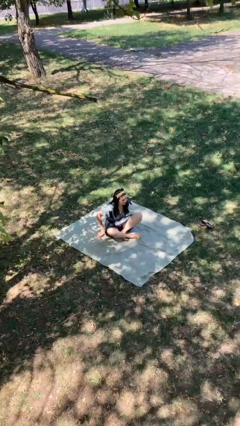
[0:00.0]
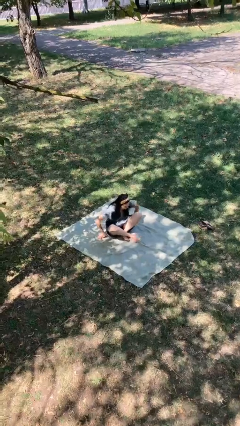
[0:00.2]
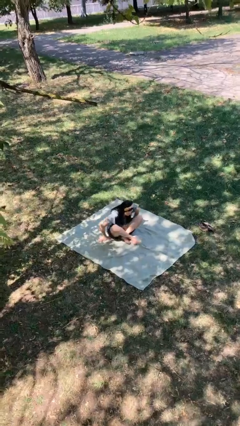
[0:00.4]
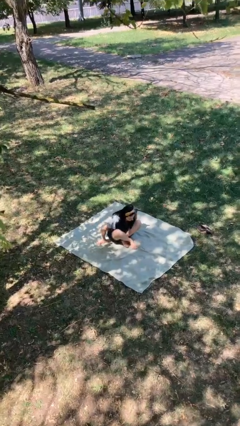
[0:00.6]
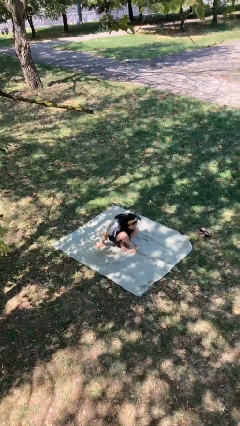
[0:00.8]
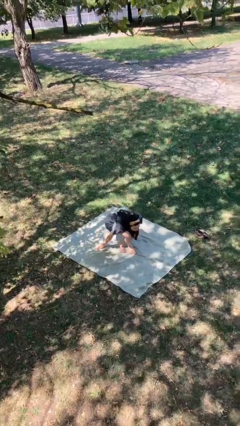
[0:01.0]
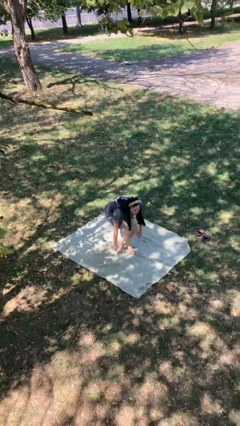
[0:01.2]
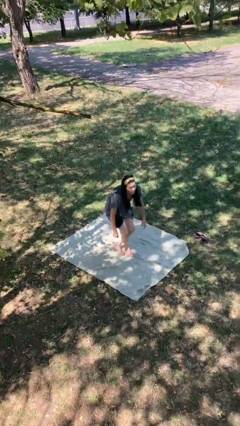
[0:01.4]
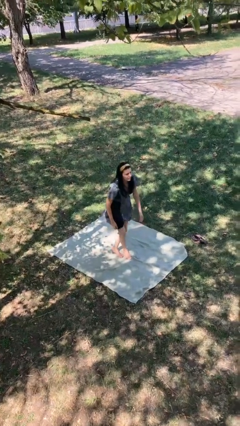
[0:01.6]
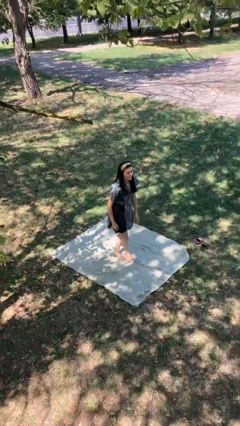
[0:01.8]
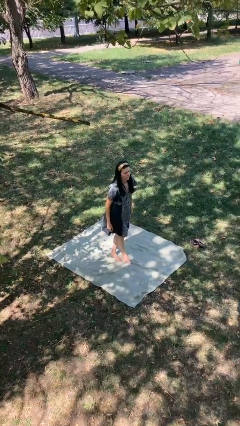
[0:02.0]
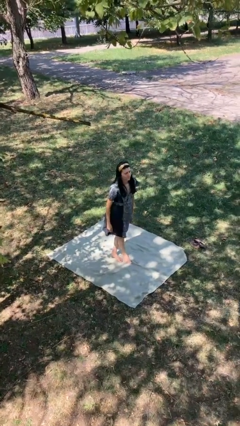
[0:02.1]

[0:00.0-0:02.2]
person stands up from floor

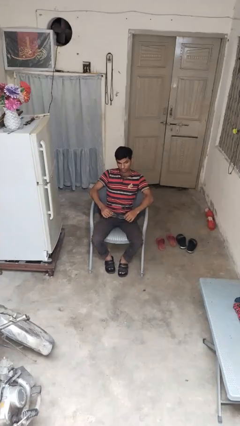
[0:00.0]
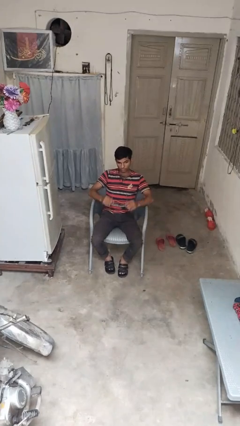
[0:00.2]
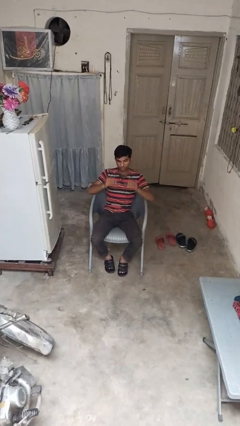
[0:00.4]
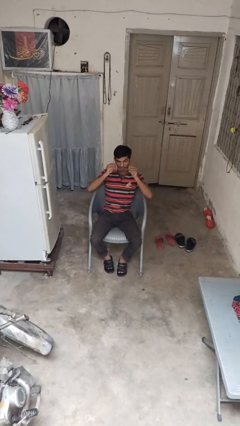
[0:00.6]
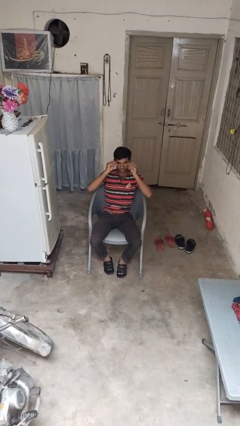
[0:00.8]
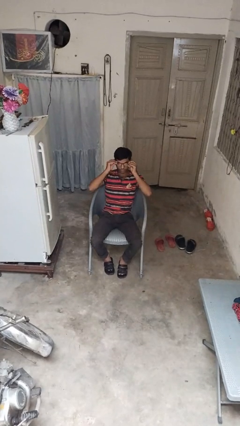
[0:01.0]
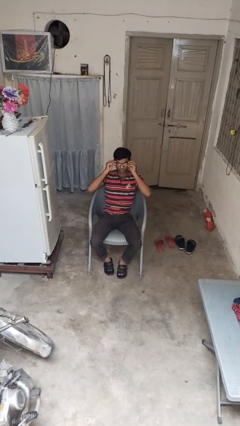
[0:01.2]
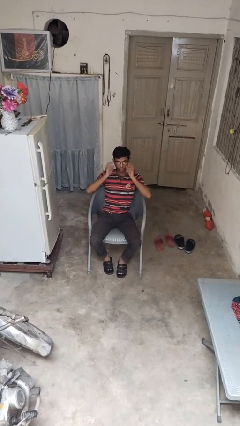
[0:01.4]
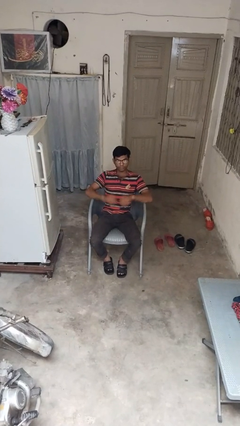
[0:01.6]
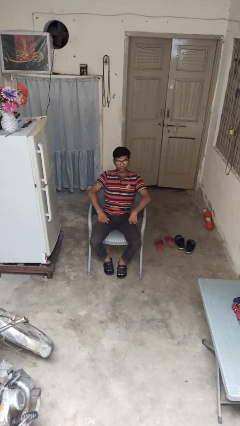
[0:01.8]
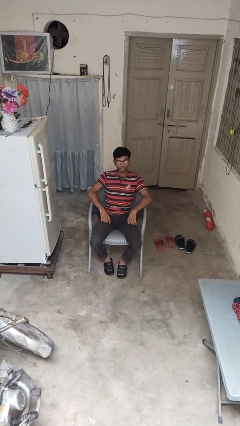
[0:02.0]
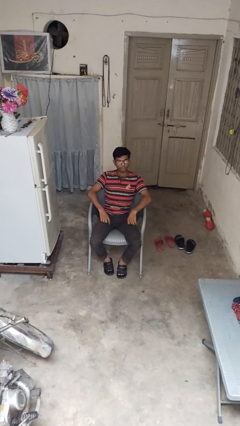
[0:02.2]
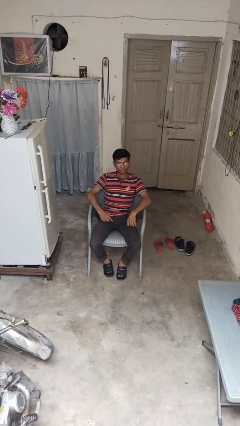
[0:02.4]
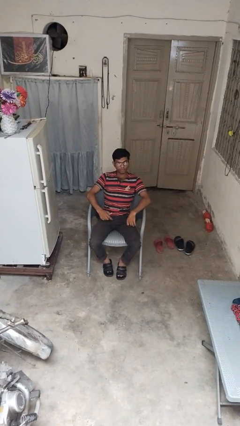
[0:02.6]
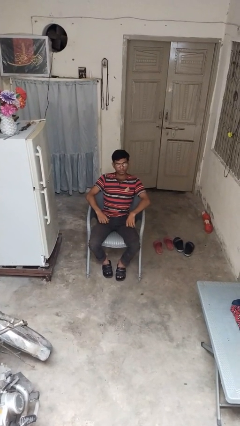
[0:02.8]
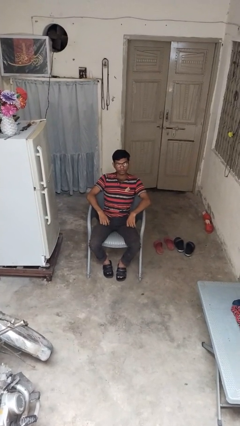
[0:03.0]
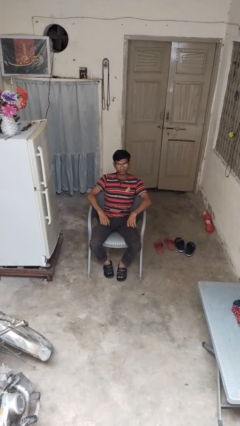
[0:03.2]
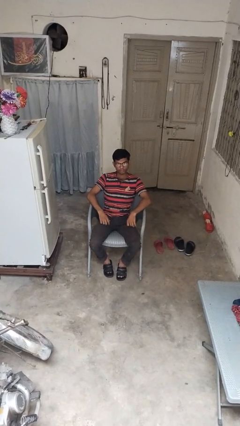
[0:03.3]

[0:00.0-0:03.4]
person puts on glasses

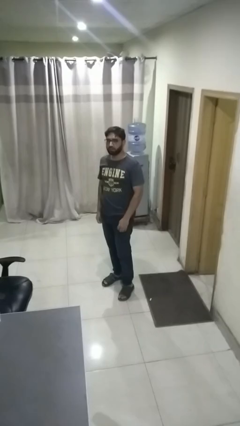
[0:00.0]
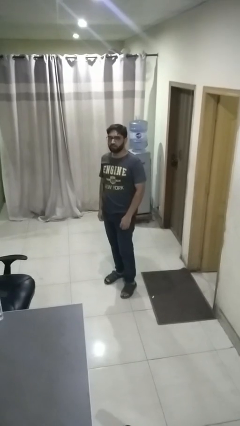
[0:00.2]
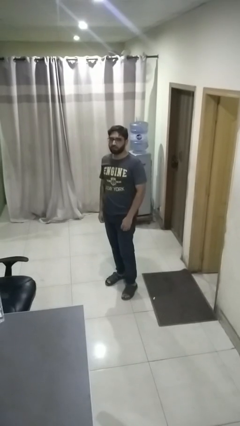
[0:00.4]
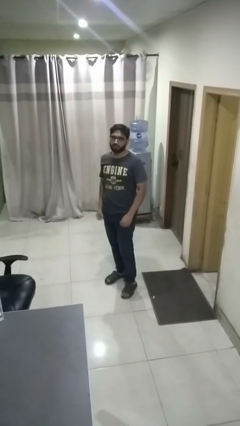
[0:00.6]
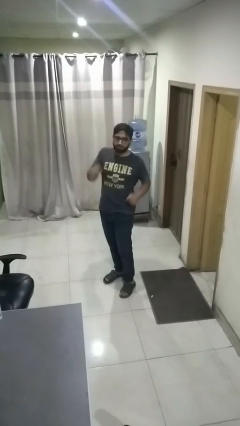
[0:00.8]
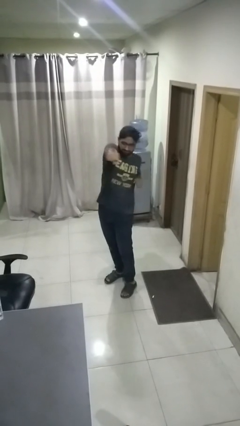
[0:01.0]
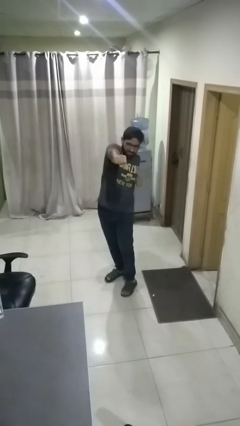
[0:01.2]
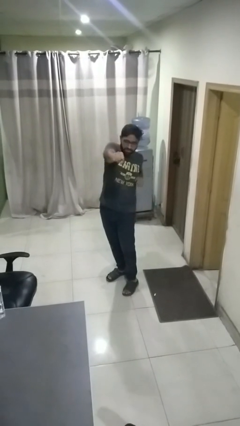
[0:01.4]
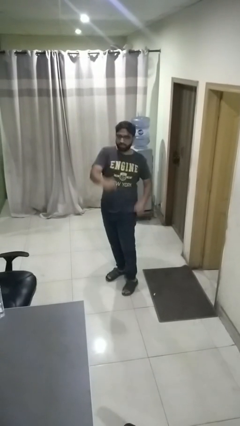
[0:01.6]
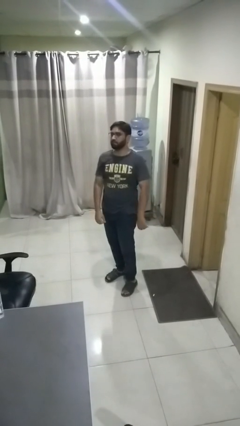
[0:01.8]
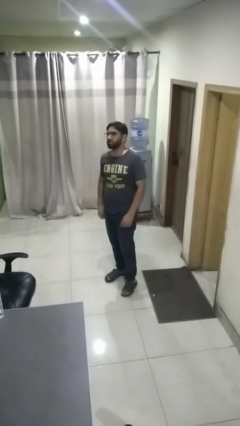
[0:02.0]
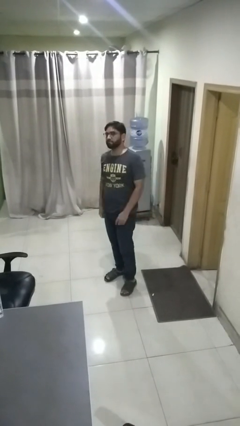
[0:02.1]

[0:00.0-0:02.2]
person punches

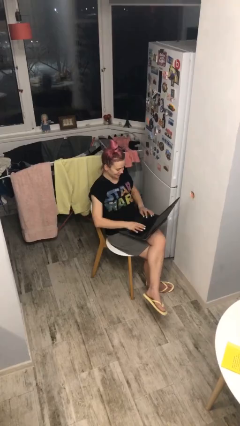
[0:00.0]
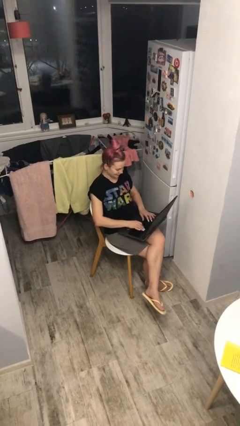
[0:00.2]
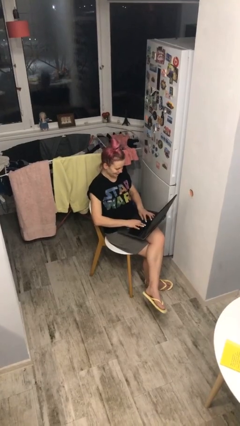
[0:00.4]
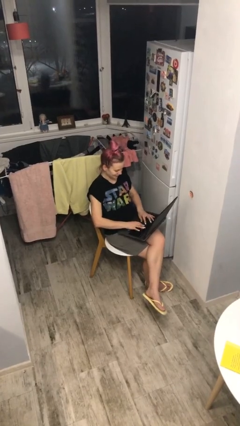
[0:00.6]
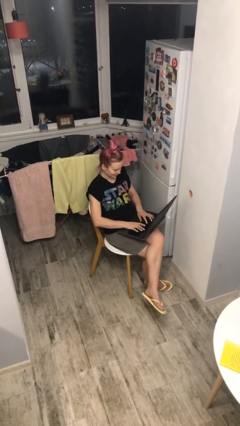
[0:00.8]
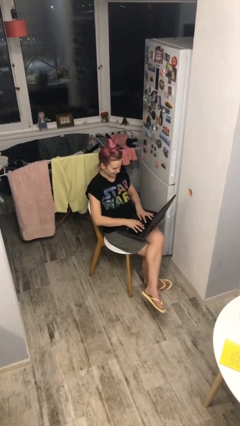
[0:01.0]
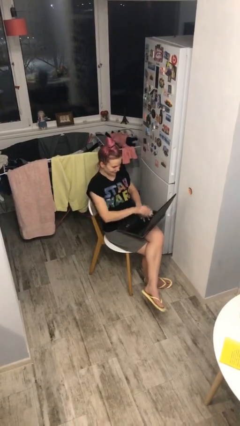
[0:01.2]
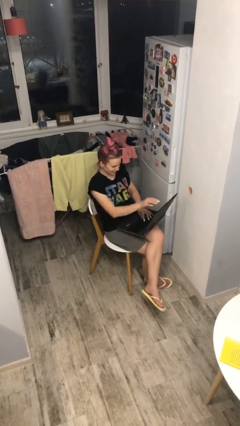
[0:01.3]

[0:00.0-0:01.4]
person interacts with laptop

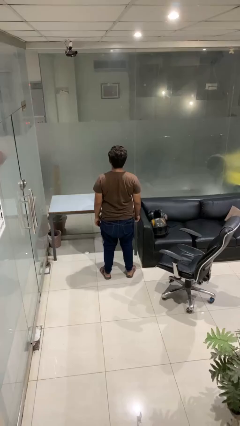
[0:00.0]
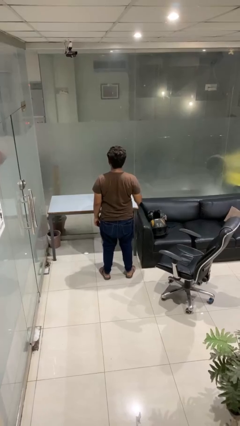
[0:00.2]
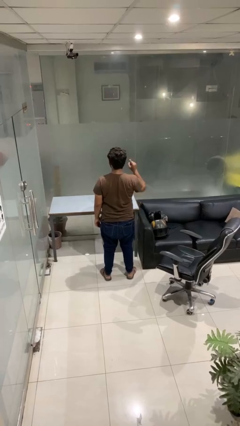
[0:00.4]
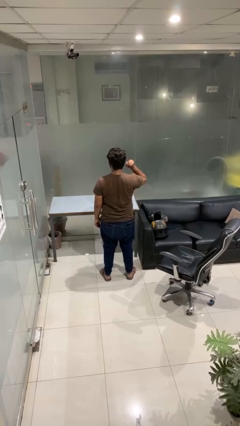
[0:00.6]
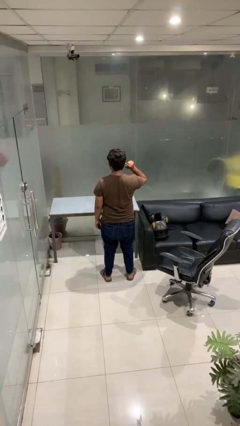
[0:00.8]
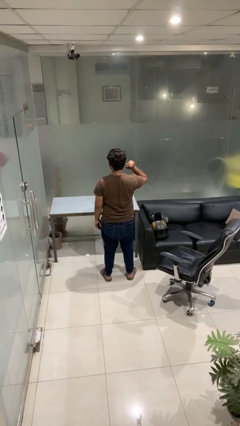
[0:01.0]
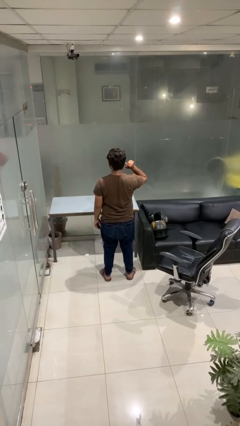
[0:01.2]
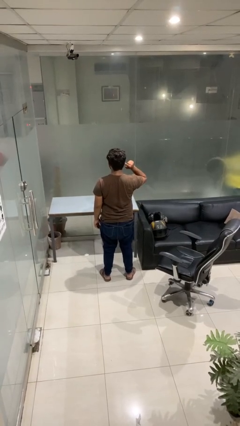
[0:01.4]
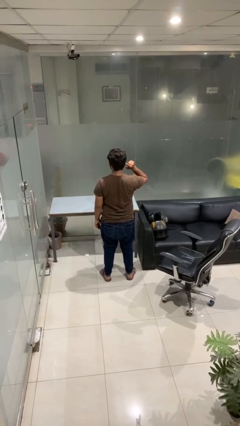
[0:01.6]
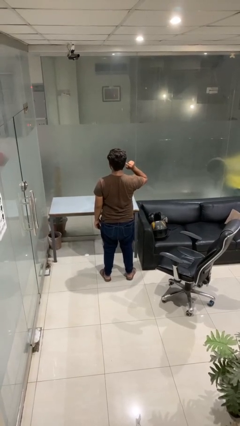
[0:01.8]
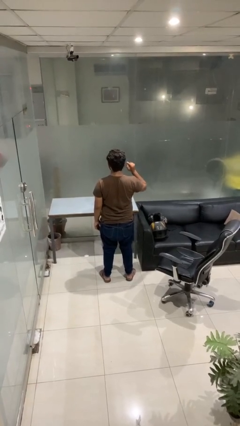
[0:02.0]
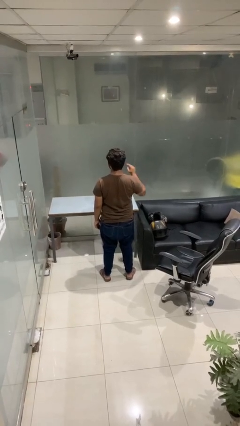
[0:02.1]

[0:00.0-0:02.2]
person gestures listen closely

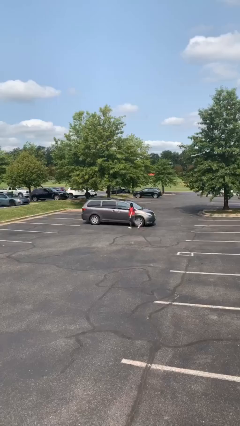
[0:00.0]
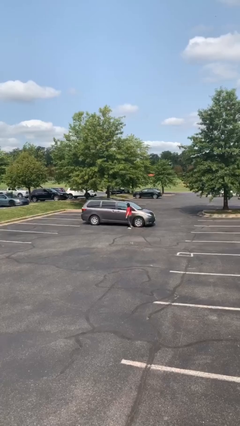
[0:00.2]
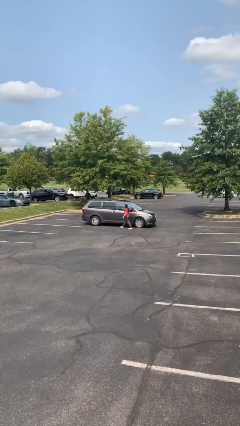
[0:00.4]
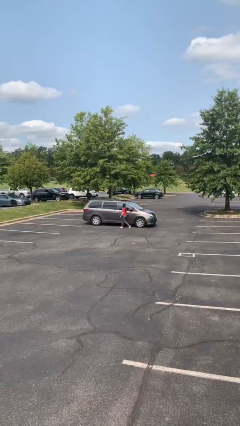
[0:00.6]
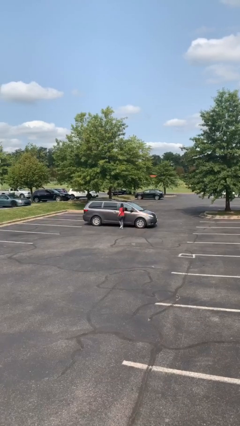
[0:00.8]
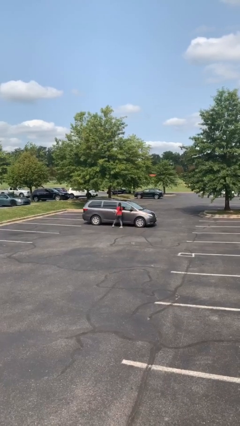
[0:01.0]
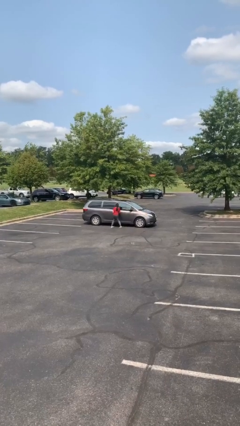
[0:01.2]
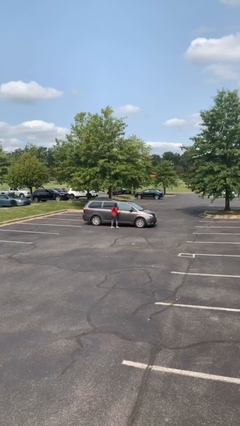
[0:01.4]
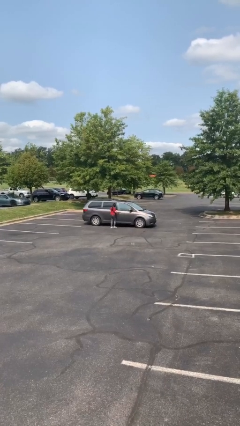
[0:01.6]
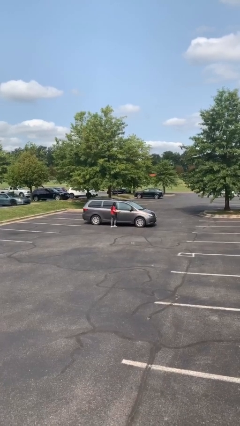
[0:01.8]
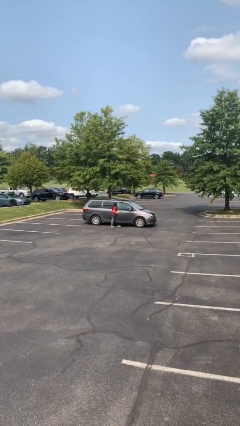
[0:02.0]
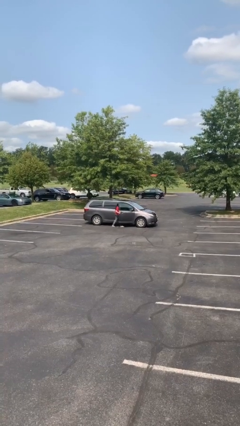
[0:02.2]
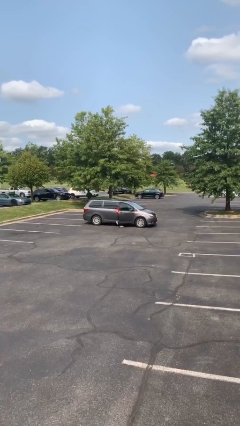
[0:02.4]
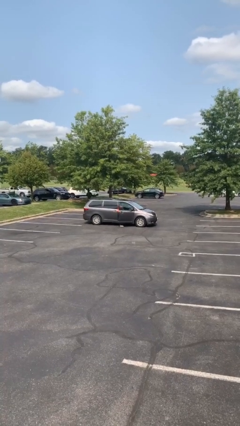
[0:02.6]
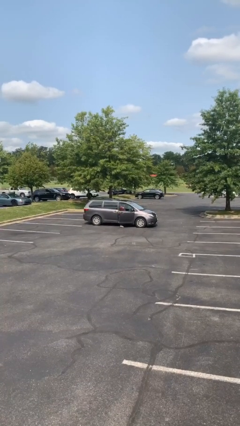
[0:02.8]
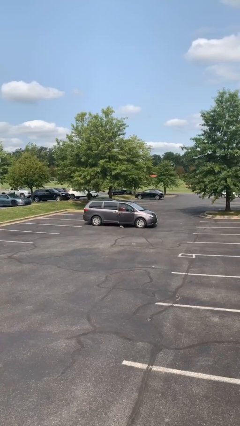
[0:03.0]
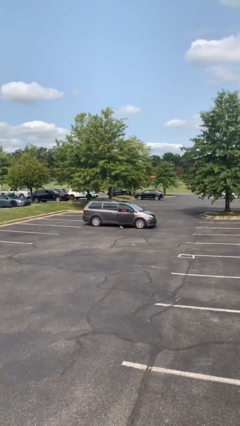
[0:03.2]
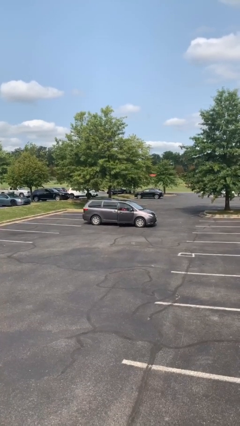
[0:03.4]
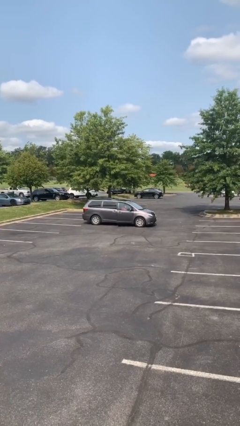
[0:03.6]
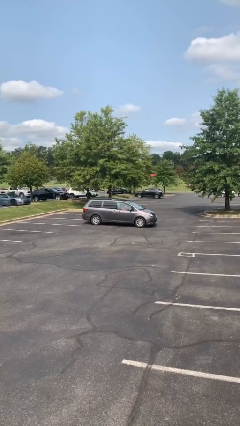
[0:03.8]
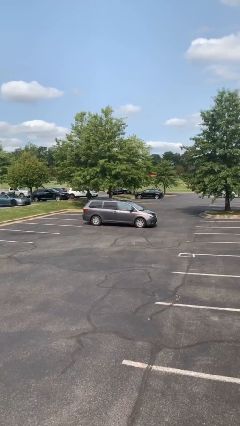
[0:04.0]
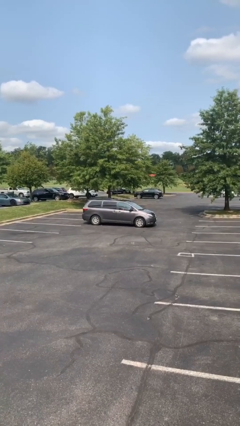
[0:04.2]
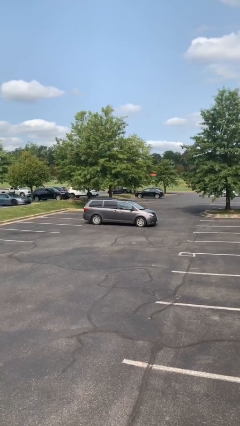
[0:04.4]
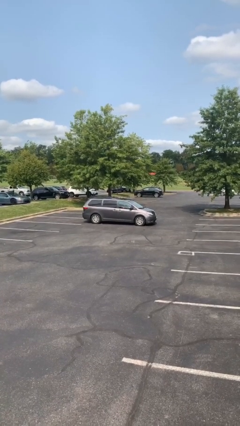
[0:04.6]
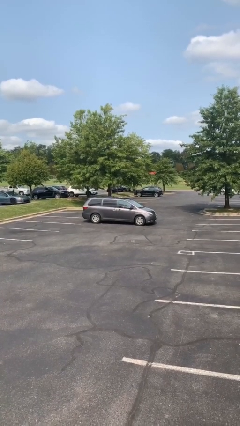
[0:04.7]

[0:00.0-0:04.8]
car picks up person

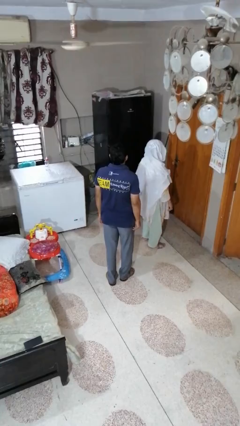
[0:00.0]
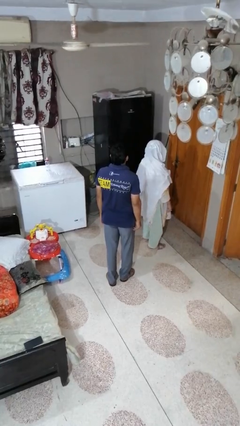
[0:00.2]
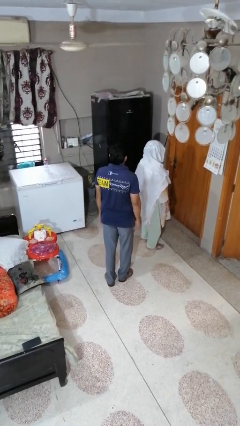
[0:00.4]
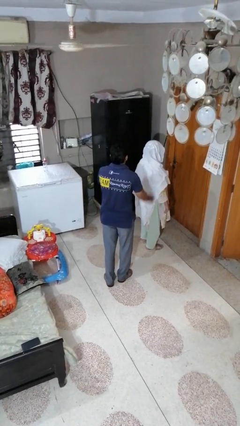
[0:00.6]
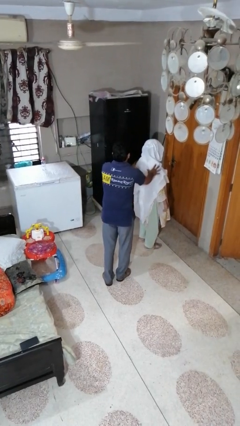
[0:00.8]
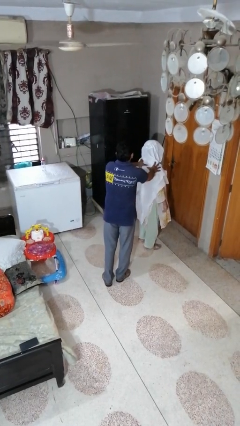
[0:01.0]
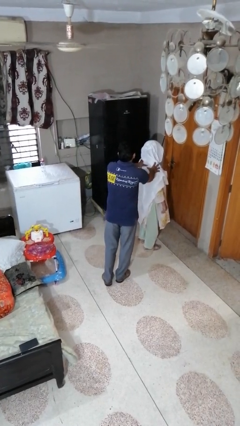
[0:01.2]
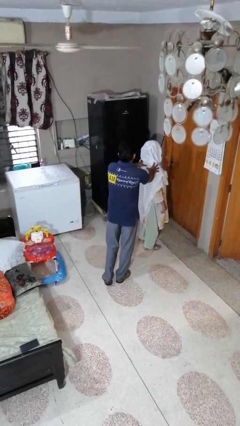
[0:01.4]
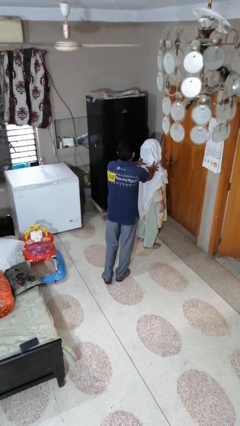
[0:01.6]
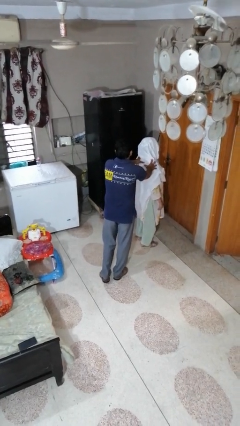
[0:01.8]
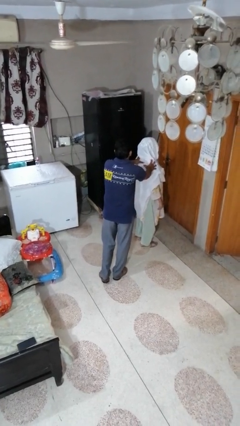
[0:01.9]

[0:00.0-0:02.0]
person grabs person by shoulder
